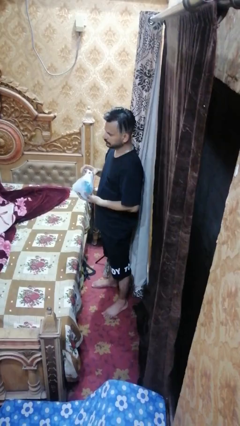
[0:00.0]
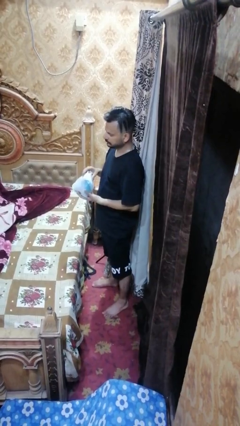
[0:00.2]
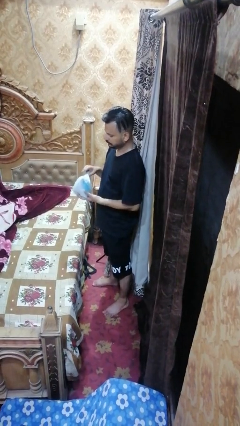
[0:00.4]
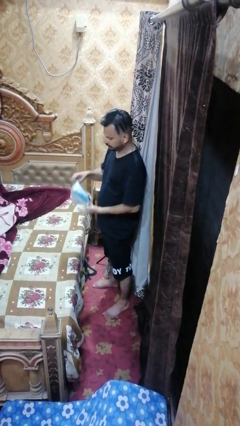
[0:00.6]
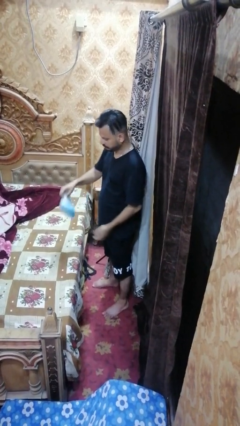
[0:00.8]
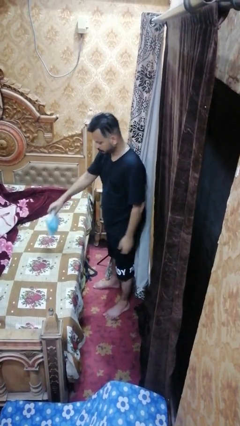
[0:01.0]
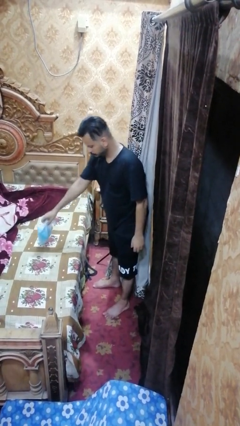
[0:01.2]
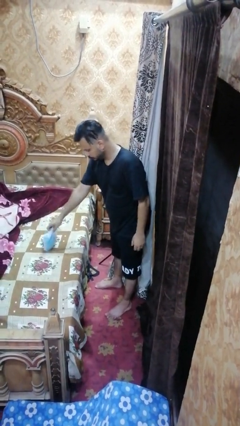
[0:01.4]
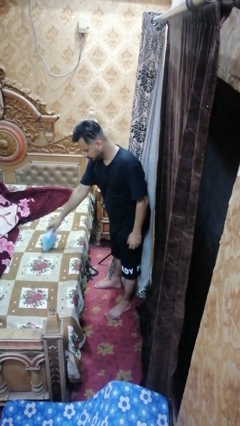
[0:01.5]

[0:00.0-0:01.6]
person puts down object on bed

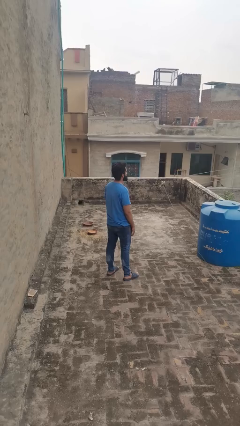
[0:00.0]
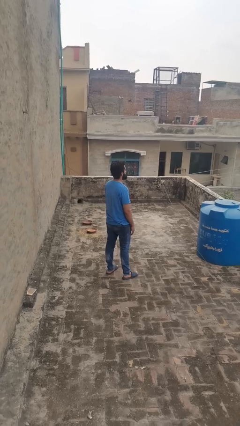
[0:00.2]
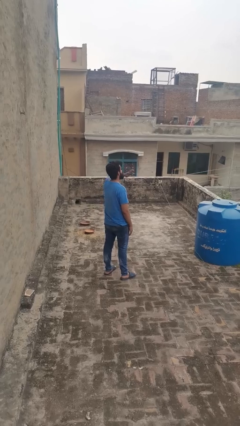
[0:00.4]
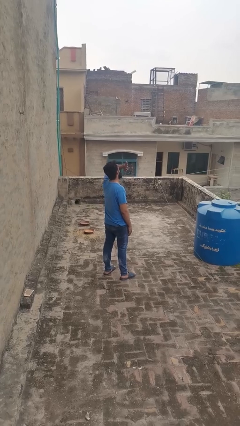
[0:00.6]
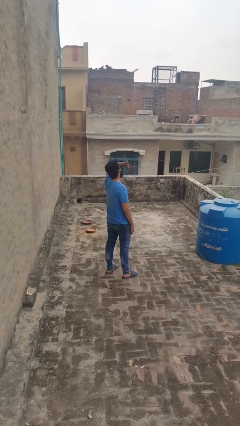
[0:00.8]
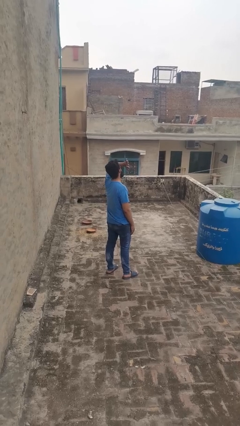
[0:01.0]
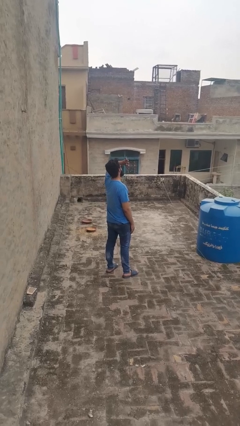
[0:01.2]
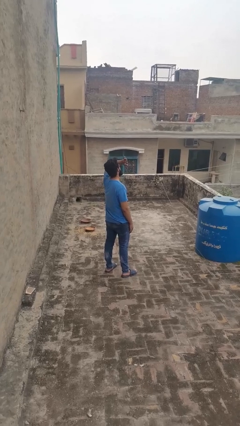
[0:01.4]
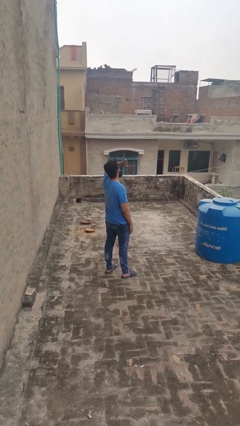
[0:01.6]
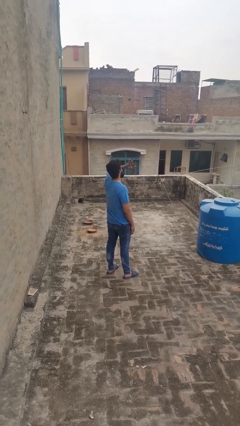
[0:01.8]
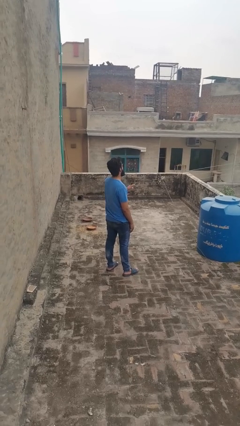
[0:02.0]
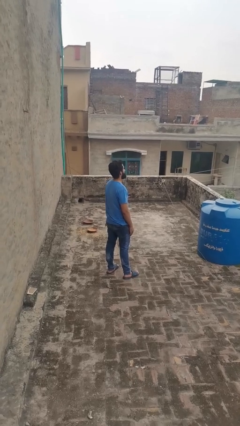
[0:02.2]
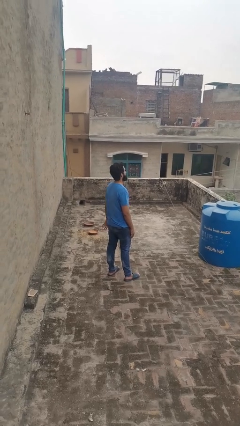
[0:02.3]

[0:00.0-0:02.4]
person shades eyes

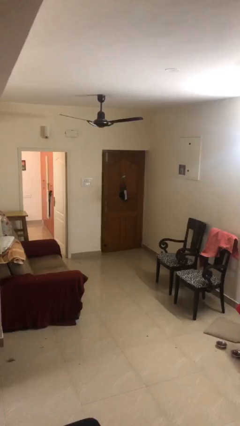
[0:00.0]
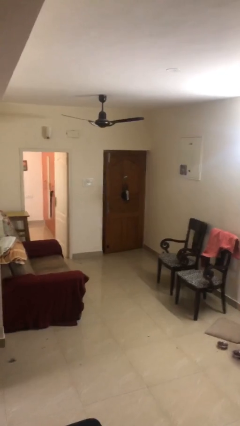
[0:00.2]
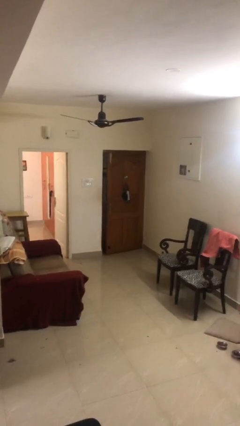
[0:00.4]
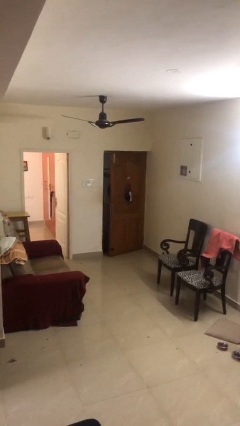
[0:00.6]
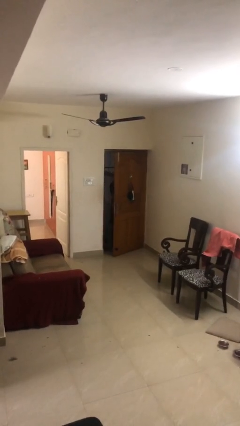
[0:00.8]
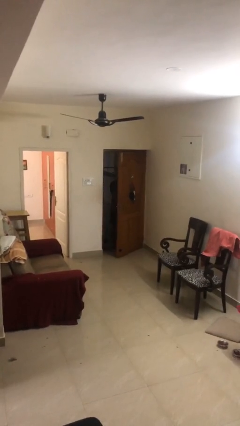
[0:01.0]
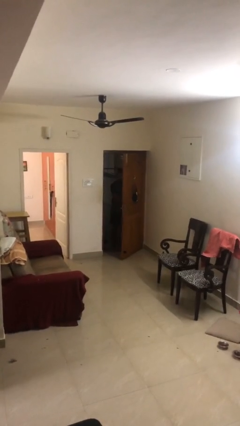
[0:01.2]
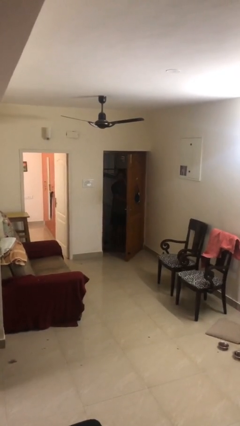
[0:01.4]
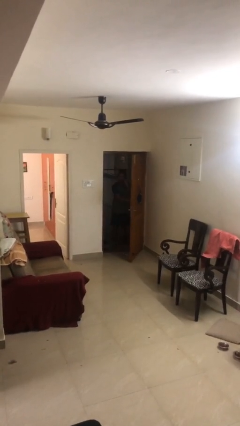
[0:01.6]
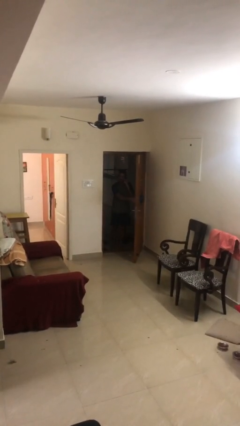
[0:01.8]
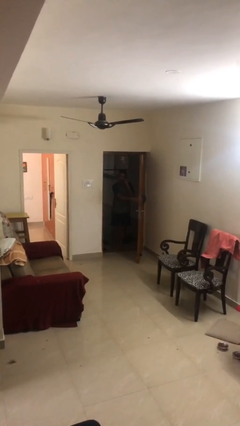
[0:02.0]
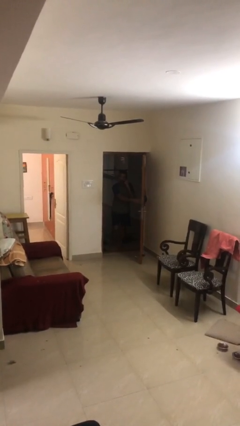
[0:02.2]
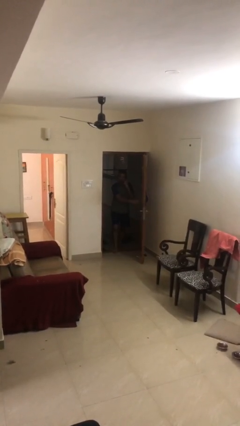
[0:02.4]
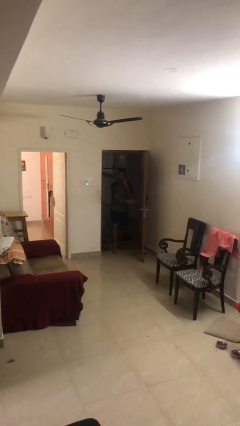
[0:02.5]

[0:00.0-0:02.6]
person opens facility door

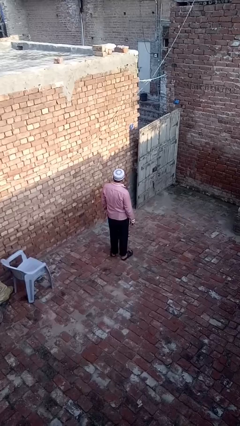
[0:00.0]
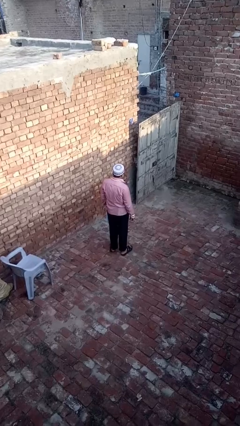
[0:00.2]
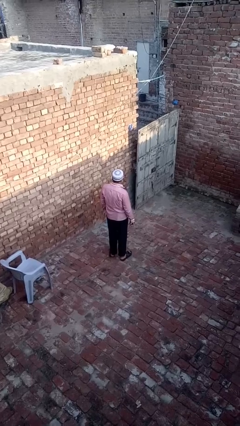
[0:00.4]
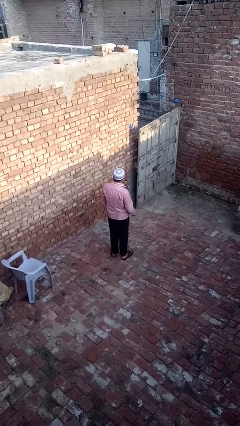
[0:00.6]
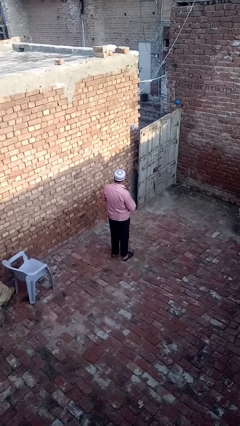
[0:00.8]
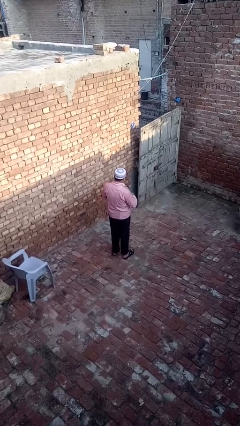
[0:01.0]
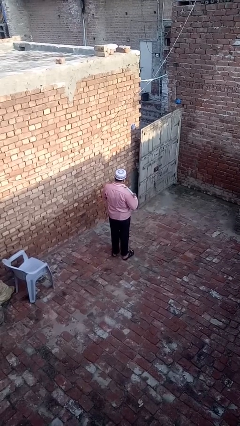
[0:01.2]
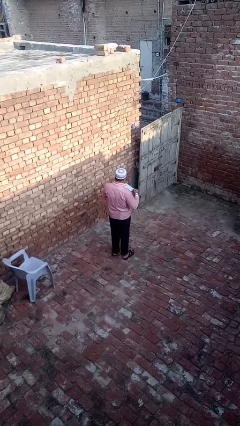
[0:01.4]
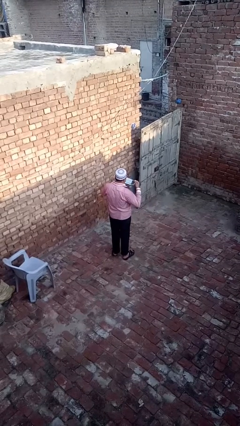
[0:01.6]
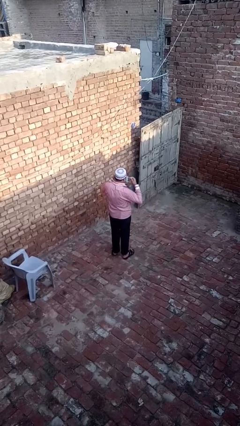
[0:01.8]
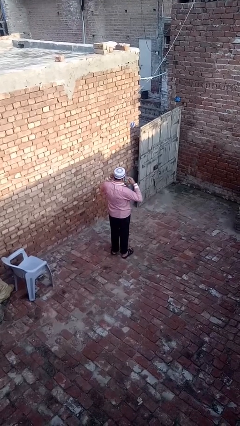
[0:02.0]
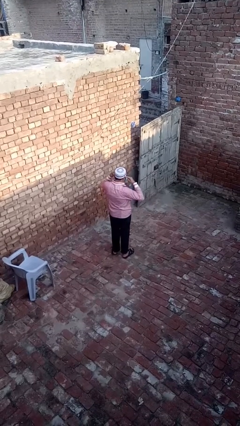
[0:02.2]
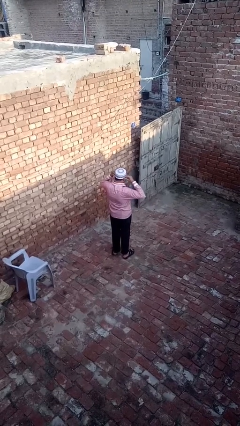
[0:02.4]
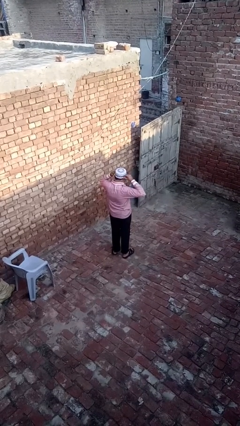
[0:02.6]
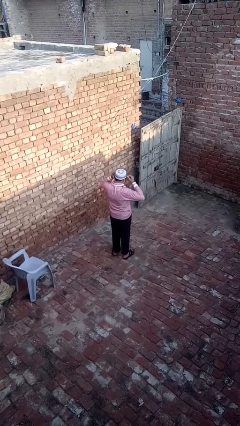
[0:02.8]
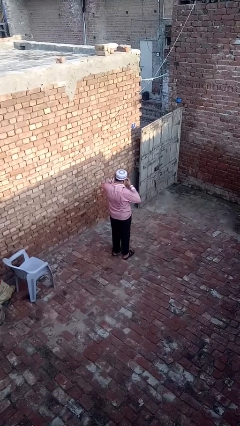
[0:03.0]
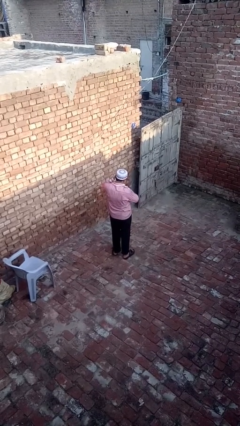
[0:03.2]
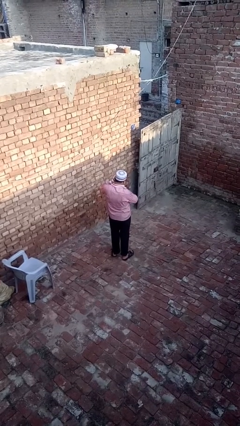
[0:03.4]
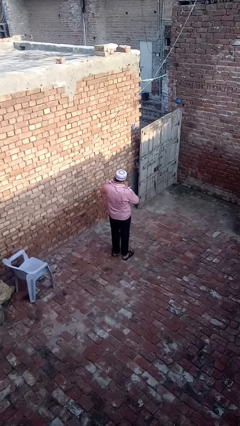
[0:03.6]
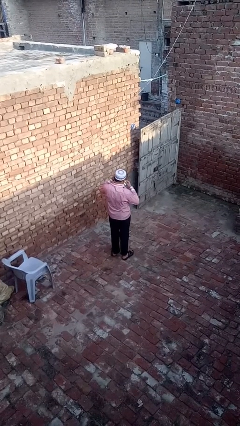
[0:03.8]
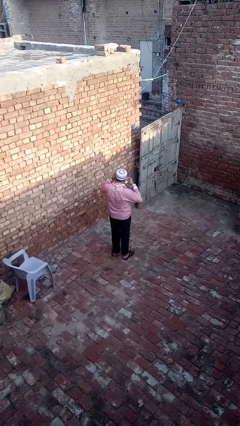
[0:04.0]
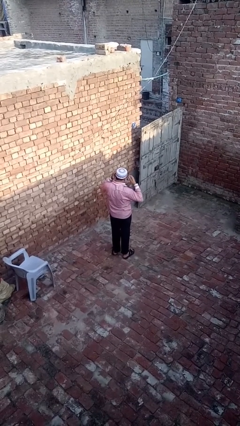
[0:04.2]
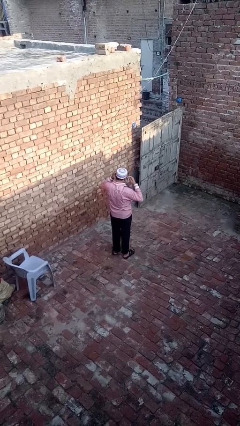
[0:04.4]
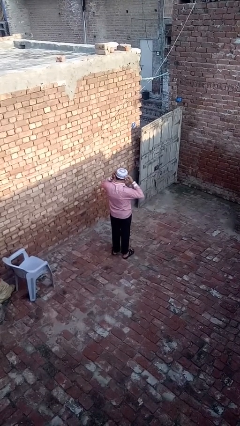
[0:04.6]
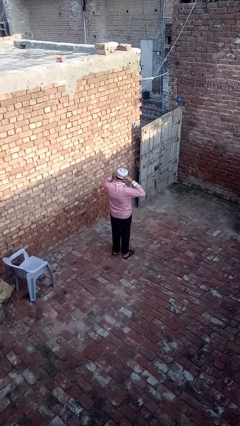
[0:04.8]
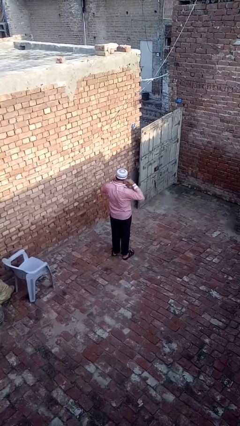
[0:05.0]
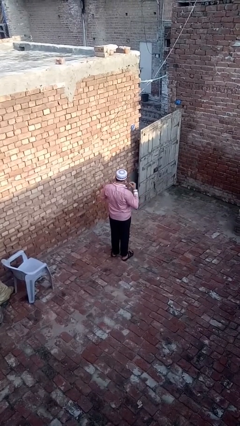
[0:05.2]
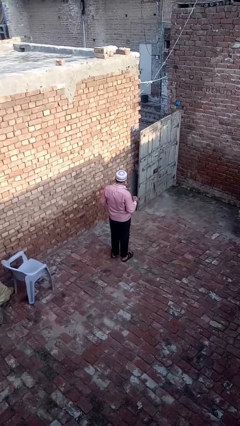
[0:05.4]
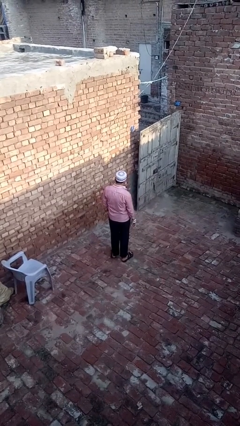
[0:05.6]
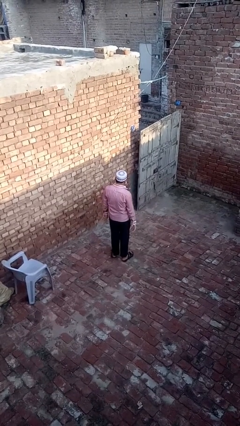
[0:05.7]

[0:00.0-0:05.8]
person puts on facemask

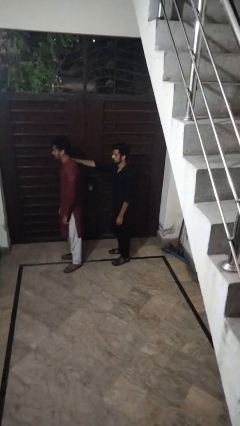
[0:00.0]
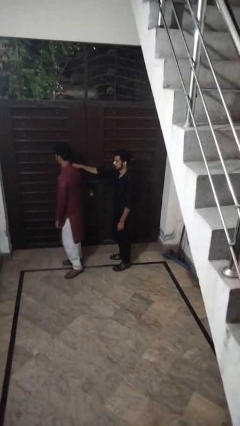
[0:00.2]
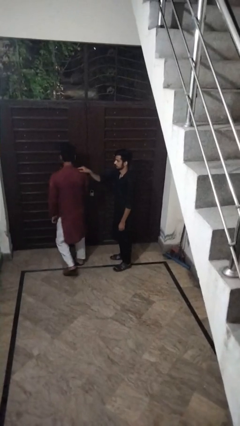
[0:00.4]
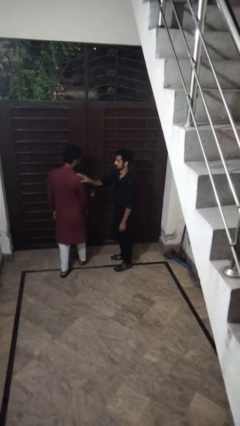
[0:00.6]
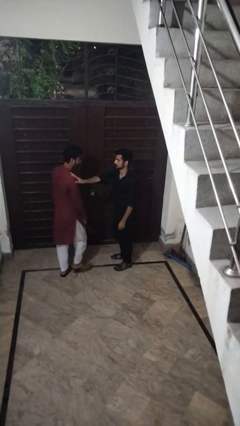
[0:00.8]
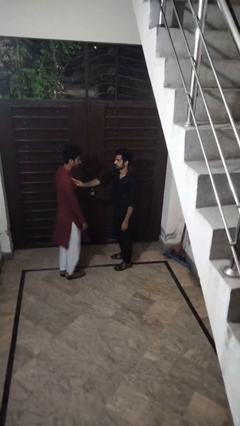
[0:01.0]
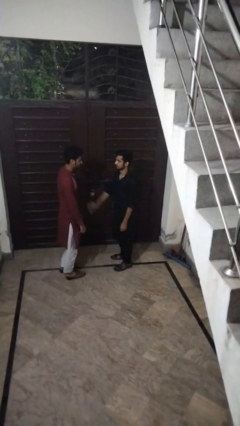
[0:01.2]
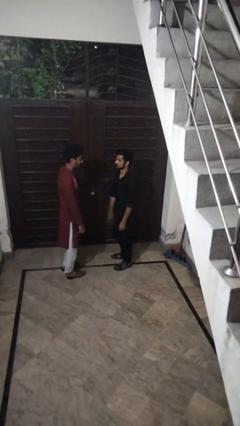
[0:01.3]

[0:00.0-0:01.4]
person spins person around

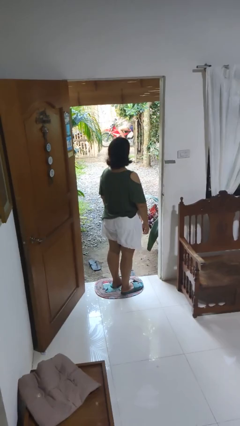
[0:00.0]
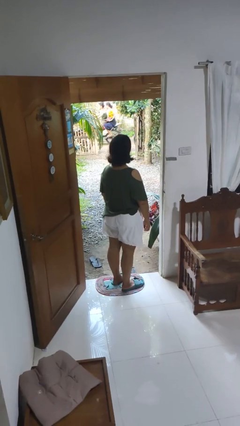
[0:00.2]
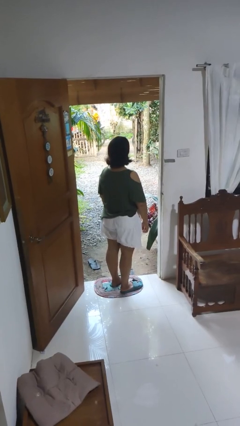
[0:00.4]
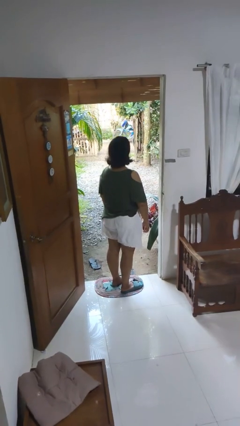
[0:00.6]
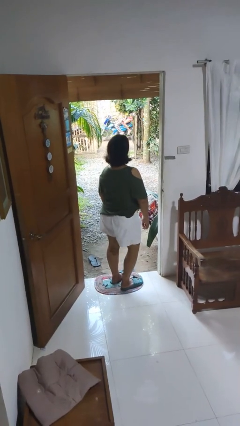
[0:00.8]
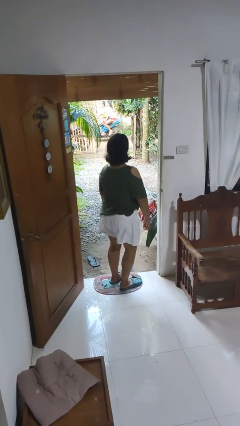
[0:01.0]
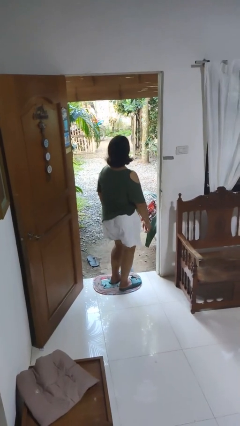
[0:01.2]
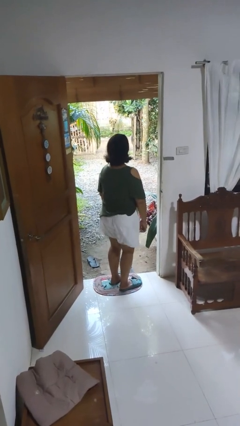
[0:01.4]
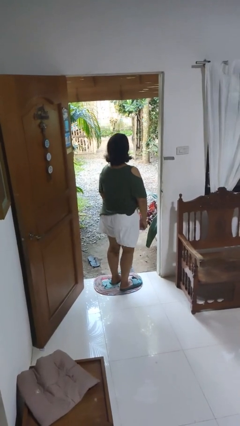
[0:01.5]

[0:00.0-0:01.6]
person wiggles hips

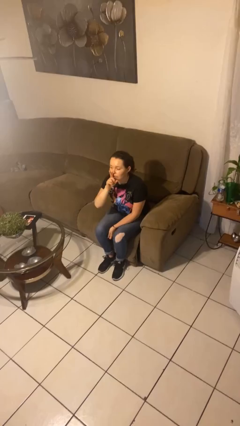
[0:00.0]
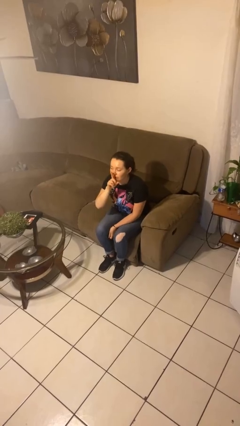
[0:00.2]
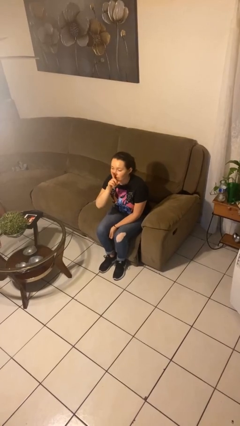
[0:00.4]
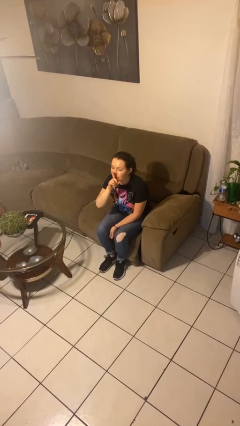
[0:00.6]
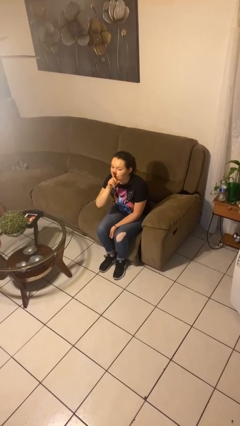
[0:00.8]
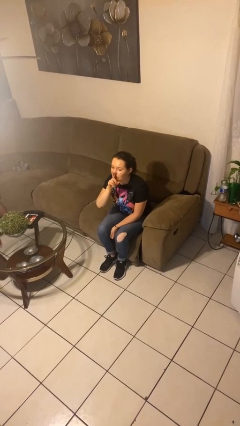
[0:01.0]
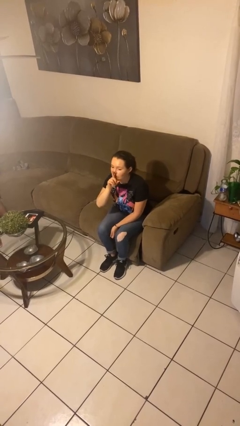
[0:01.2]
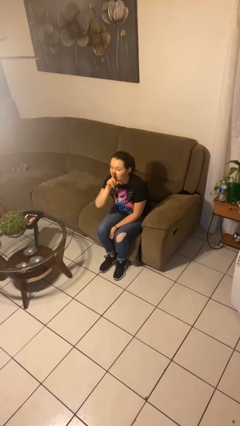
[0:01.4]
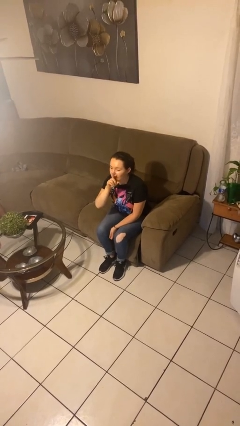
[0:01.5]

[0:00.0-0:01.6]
person gestures be quiet

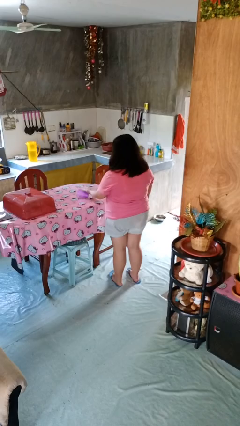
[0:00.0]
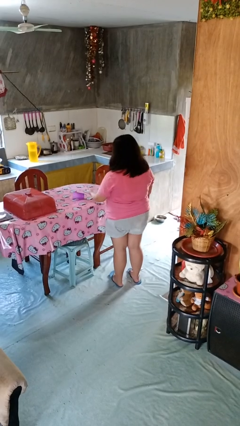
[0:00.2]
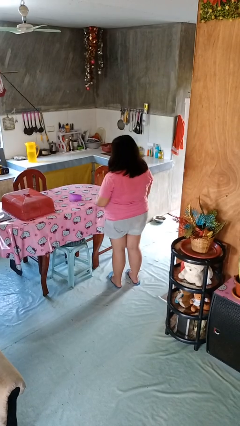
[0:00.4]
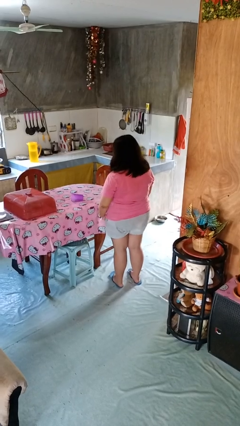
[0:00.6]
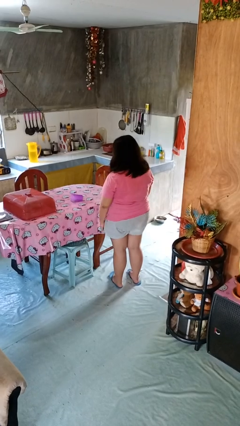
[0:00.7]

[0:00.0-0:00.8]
person spills on table
